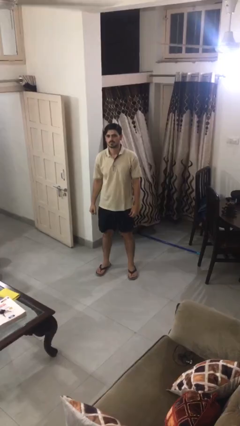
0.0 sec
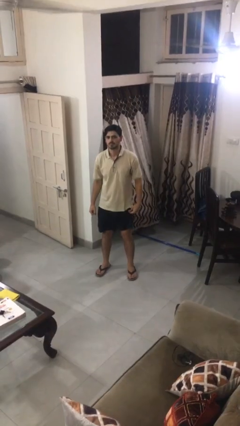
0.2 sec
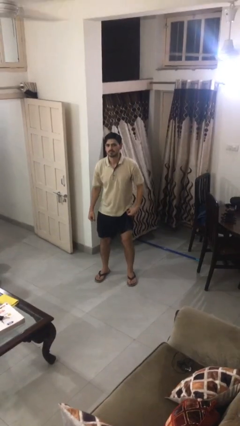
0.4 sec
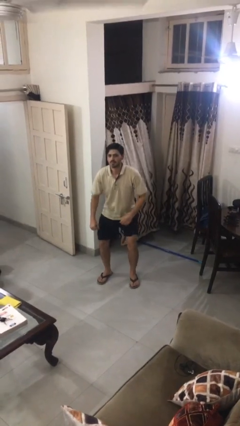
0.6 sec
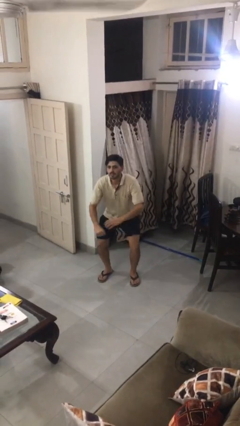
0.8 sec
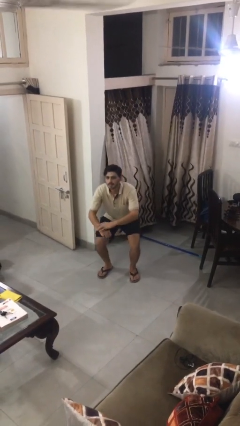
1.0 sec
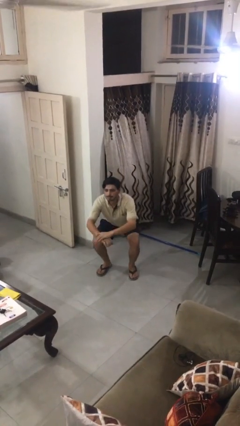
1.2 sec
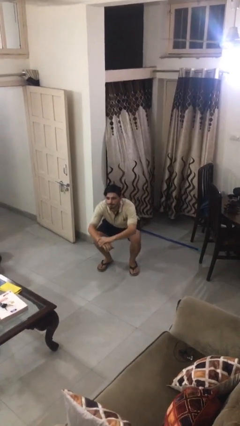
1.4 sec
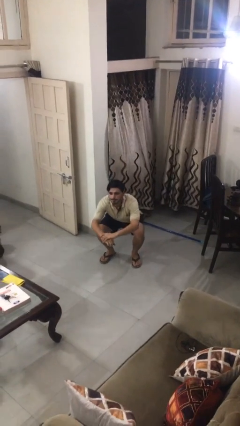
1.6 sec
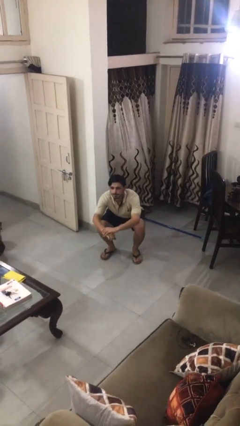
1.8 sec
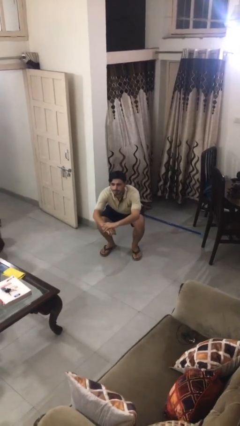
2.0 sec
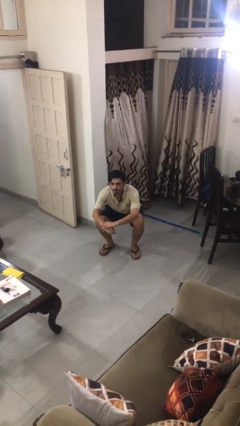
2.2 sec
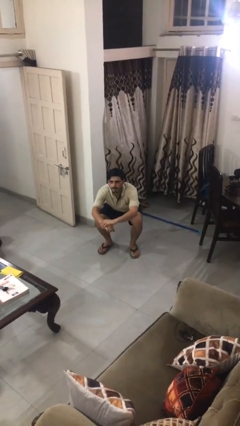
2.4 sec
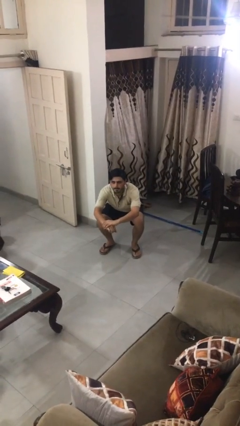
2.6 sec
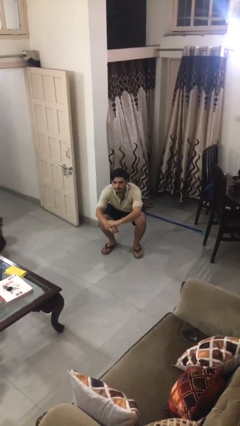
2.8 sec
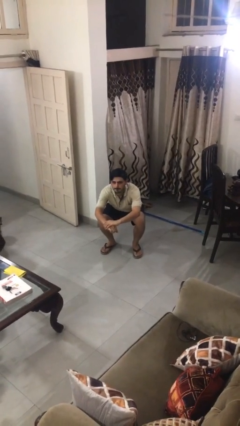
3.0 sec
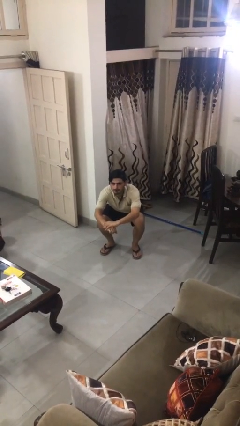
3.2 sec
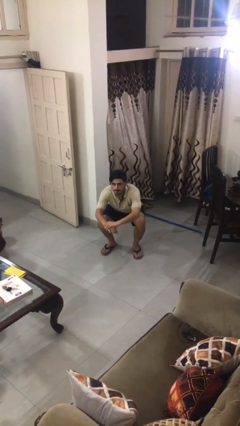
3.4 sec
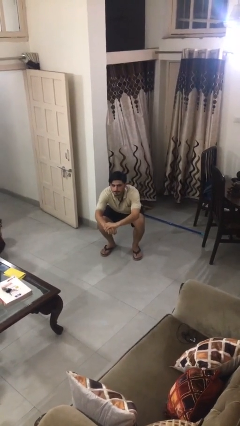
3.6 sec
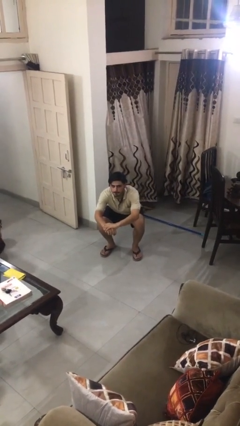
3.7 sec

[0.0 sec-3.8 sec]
person squats

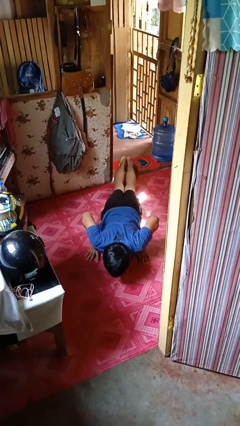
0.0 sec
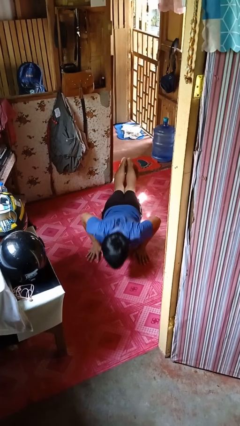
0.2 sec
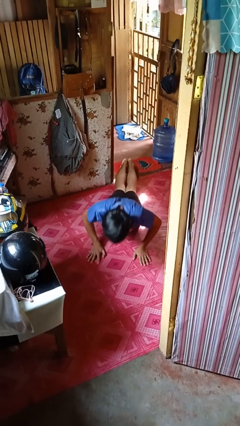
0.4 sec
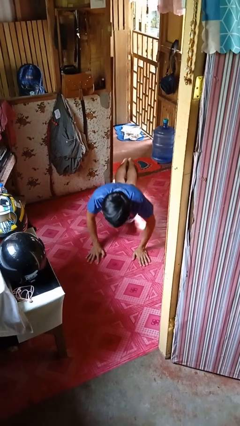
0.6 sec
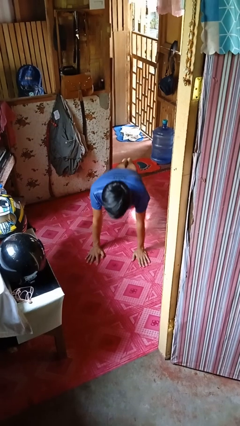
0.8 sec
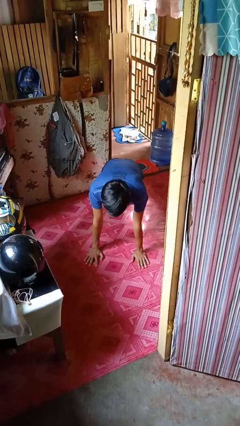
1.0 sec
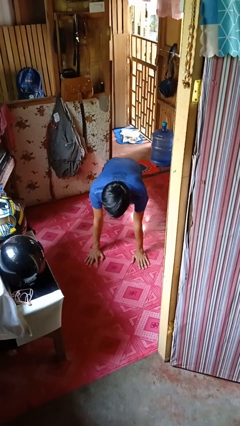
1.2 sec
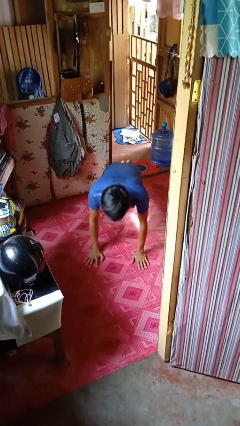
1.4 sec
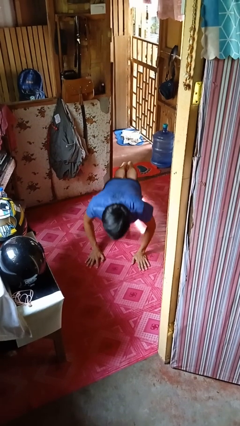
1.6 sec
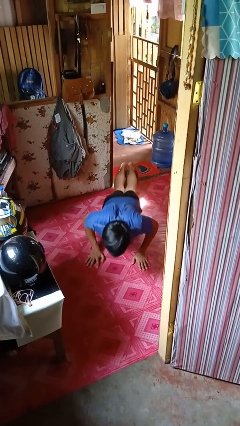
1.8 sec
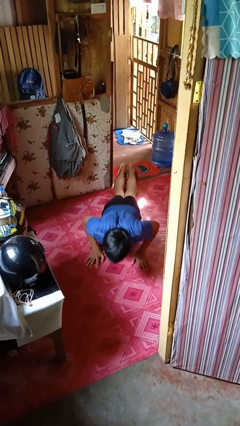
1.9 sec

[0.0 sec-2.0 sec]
person exercises with pushup

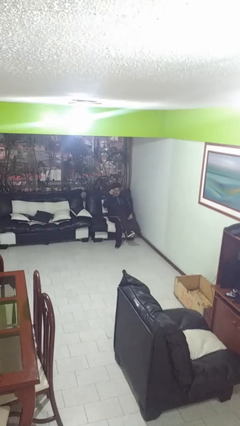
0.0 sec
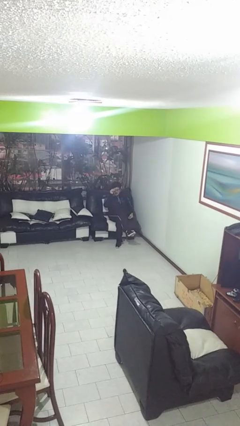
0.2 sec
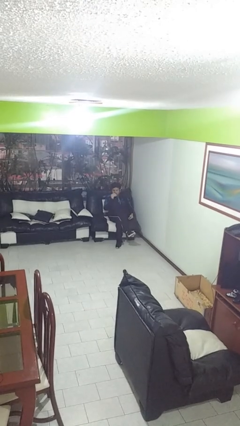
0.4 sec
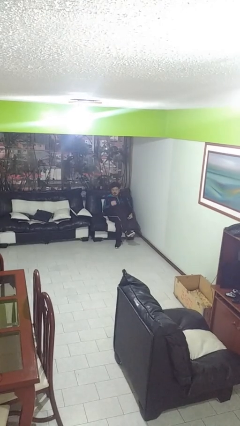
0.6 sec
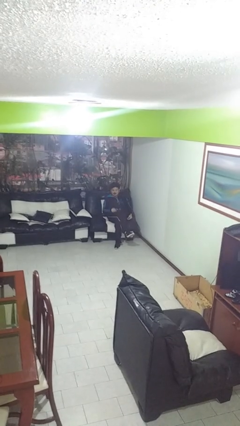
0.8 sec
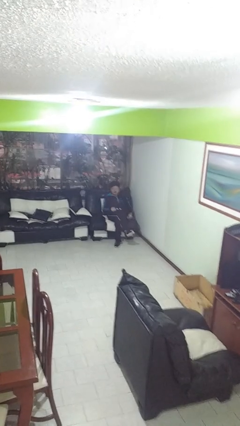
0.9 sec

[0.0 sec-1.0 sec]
person takes off glasses

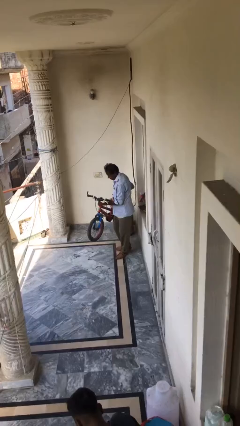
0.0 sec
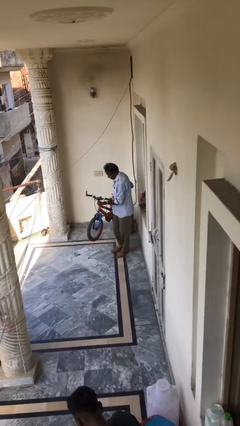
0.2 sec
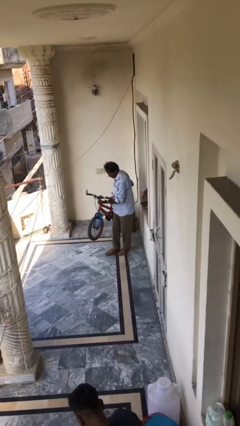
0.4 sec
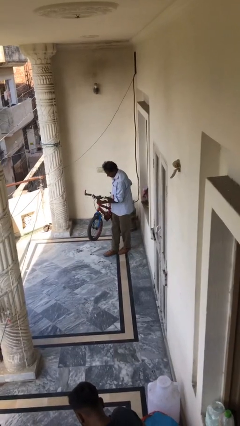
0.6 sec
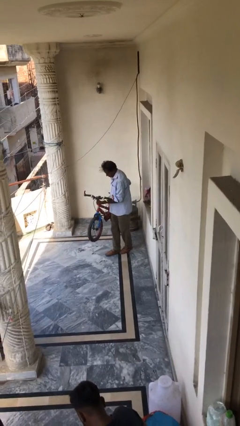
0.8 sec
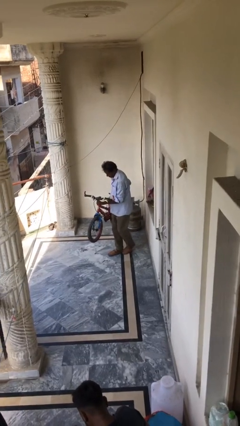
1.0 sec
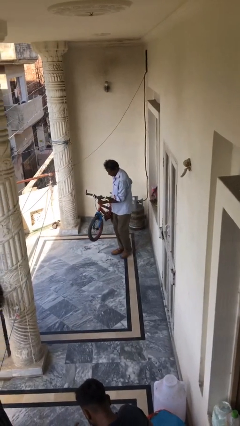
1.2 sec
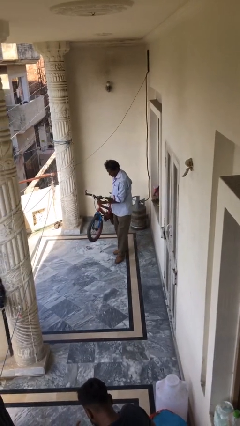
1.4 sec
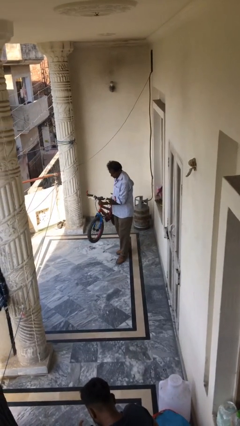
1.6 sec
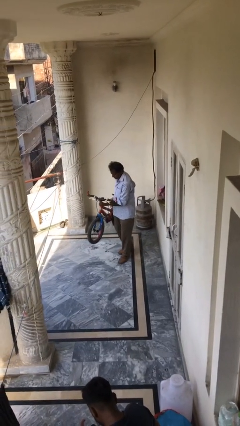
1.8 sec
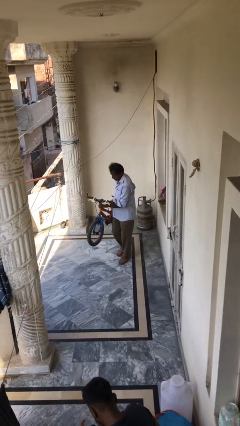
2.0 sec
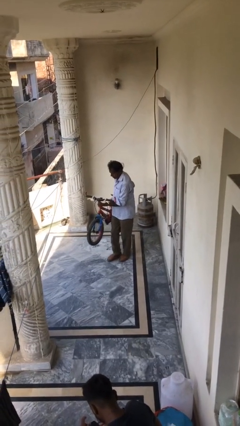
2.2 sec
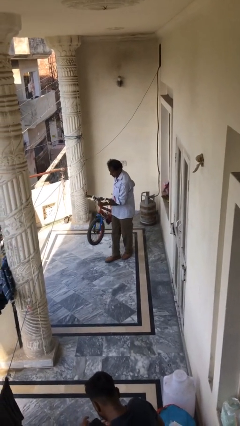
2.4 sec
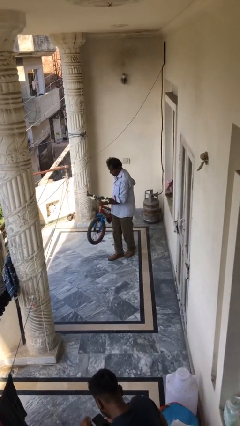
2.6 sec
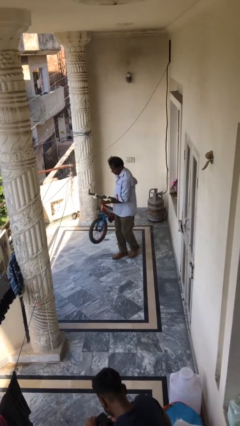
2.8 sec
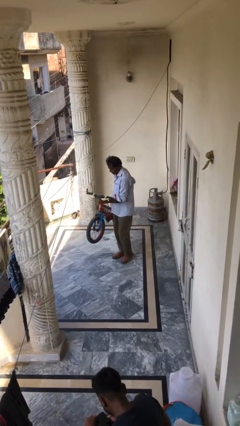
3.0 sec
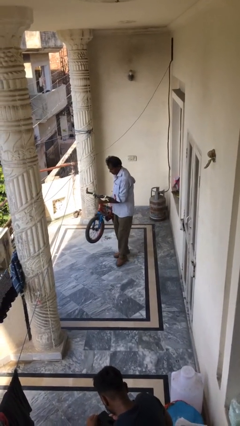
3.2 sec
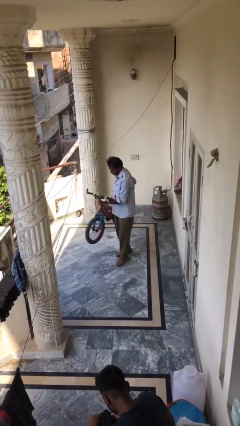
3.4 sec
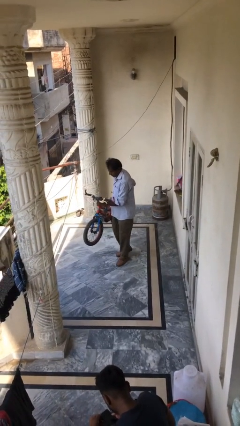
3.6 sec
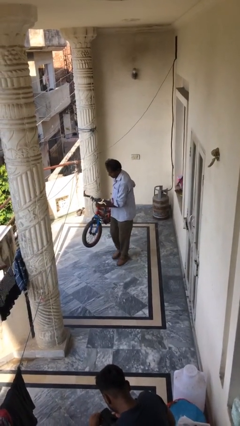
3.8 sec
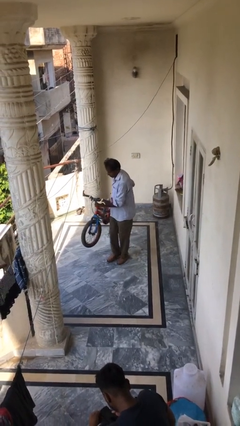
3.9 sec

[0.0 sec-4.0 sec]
person carries heavy object

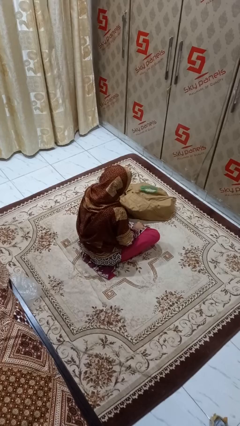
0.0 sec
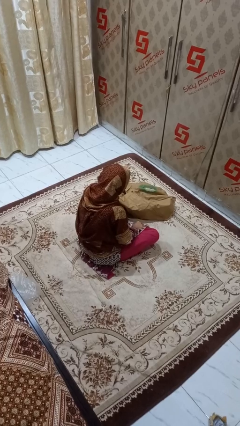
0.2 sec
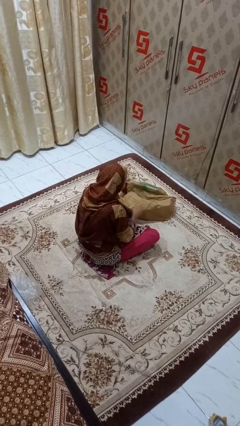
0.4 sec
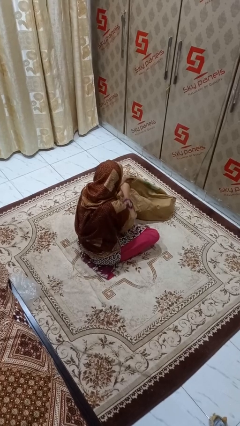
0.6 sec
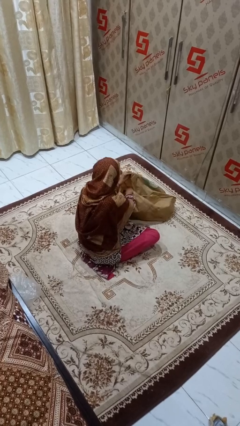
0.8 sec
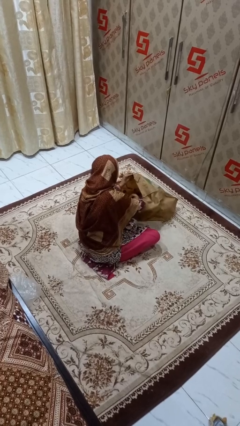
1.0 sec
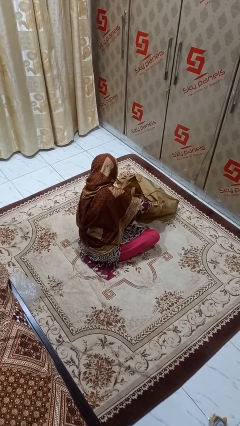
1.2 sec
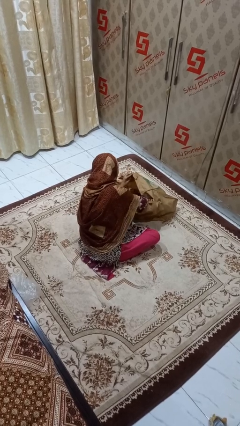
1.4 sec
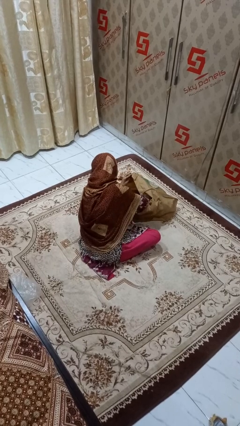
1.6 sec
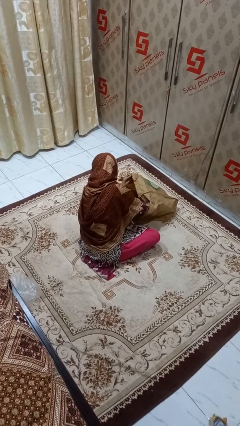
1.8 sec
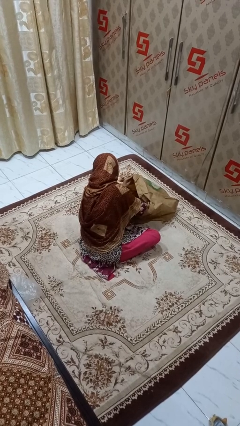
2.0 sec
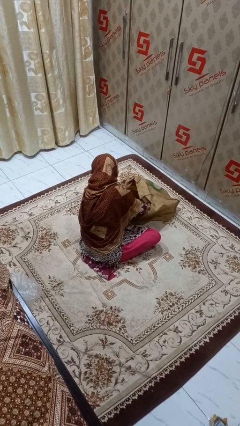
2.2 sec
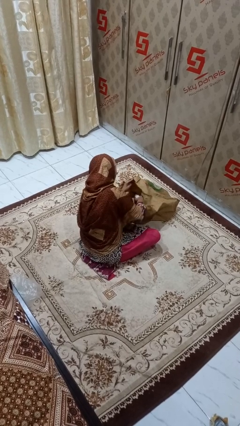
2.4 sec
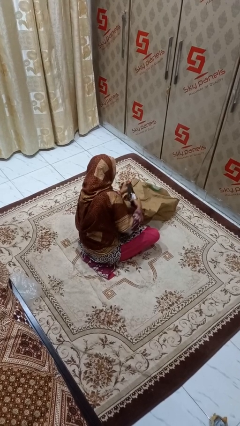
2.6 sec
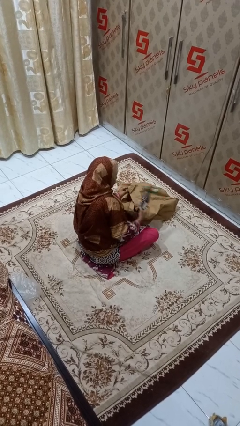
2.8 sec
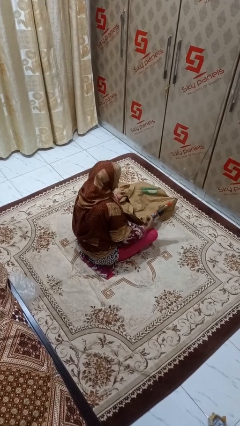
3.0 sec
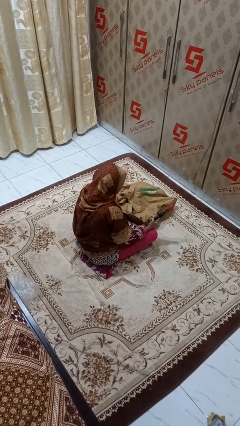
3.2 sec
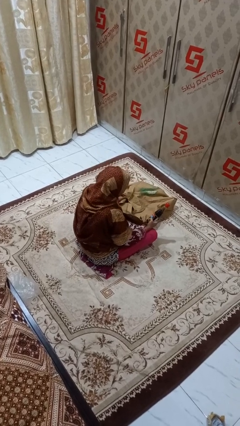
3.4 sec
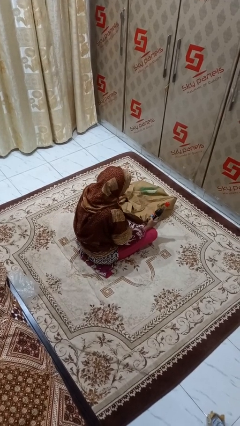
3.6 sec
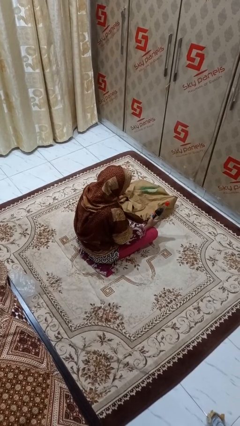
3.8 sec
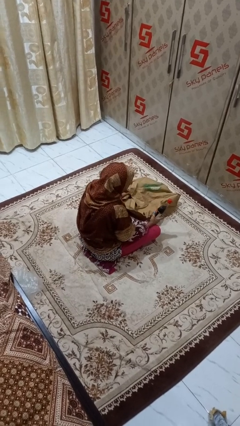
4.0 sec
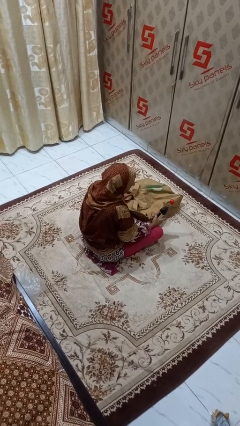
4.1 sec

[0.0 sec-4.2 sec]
person takes object from bag

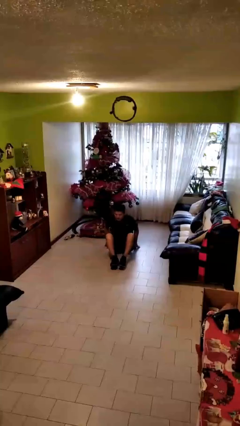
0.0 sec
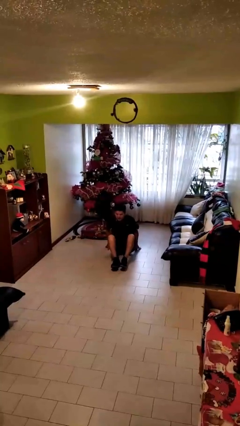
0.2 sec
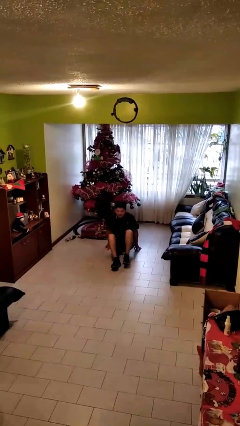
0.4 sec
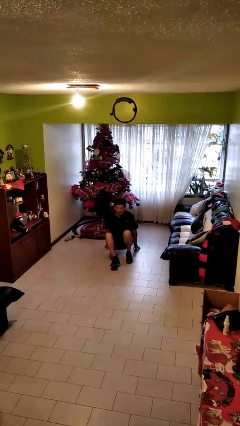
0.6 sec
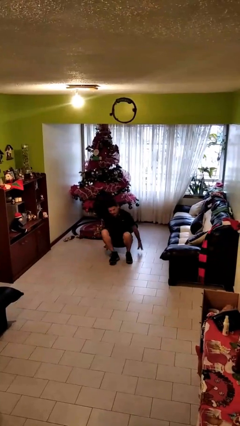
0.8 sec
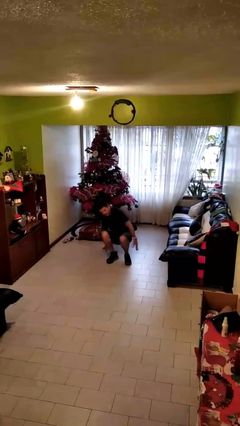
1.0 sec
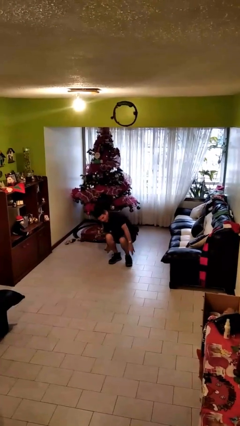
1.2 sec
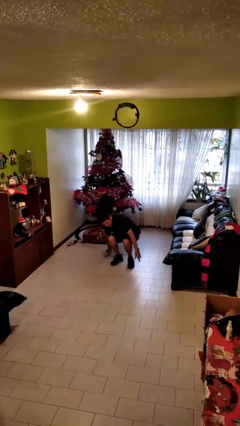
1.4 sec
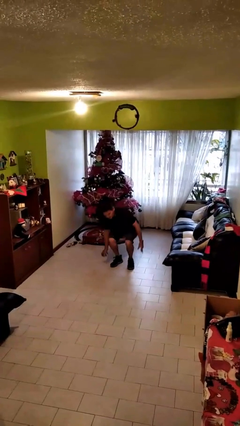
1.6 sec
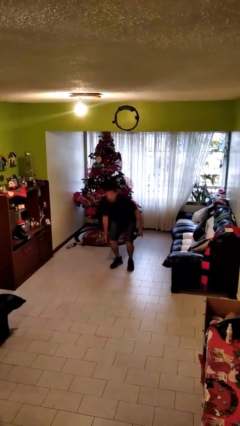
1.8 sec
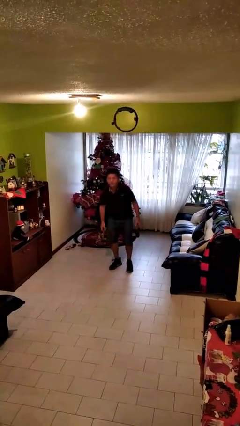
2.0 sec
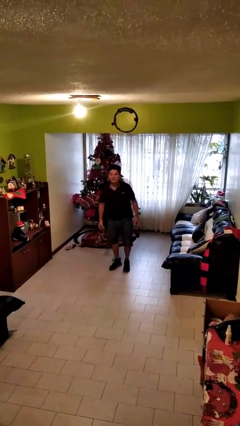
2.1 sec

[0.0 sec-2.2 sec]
person stands up

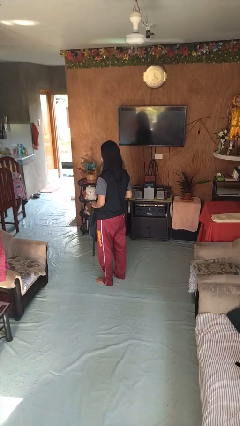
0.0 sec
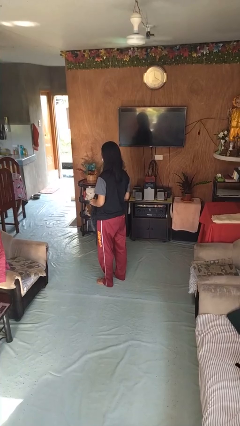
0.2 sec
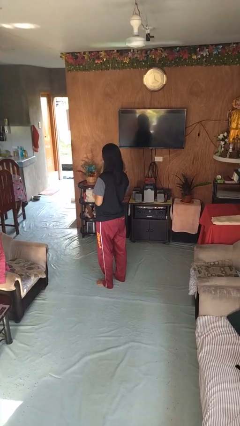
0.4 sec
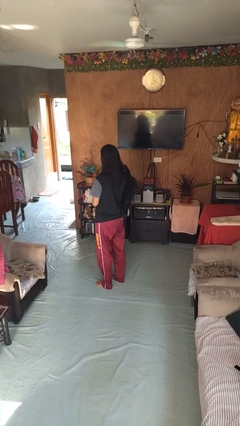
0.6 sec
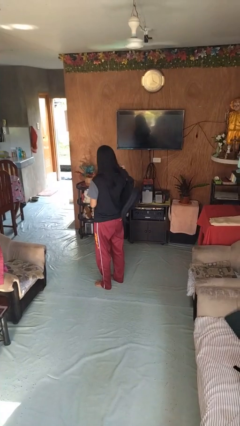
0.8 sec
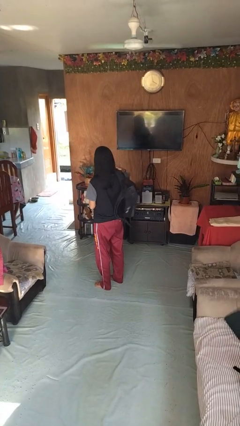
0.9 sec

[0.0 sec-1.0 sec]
person puts on backpack
